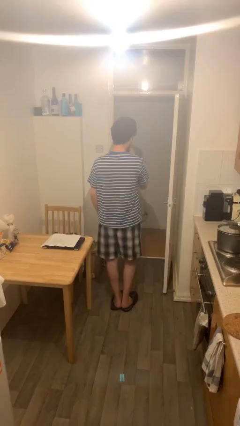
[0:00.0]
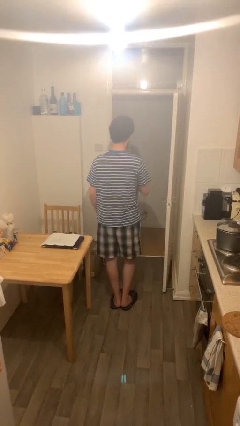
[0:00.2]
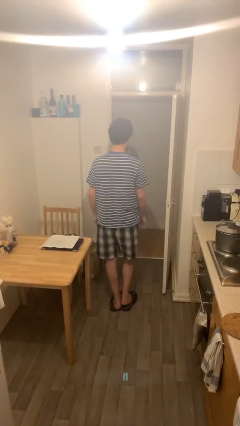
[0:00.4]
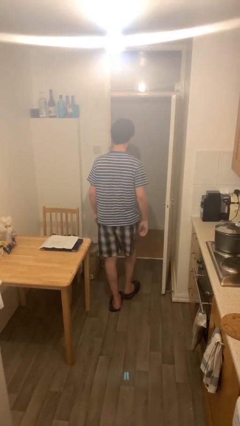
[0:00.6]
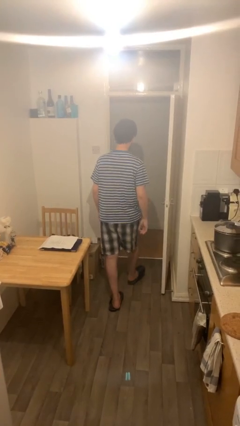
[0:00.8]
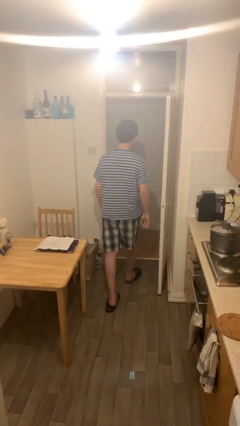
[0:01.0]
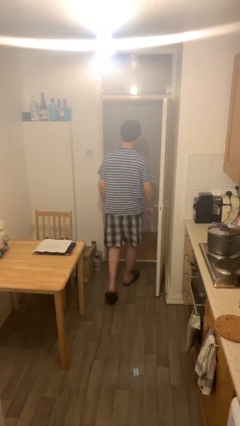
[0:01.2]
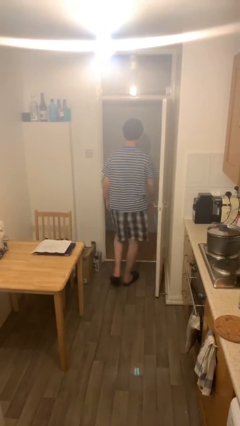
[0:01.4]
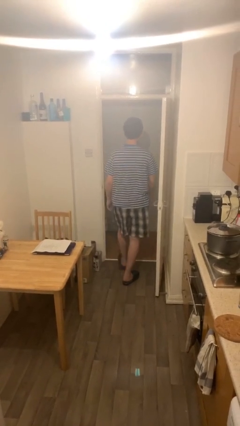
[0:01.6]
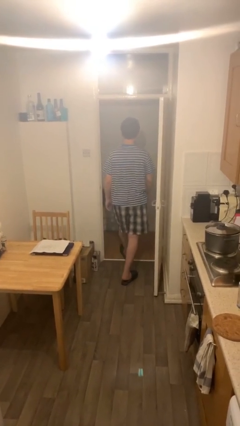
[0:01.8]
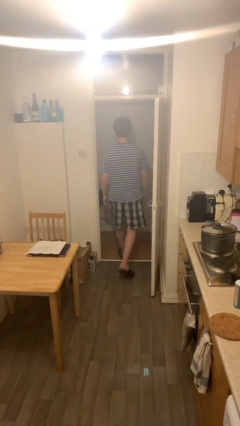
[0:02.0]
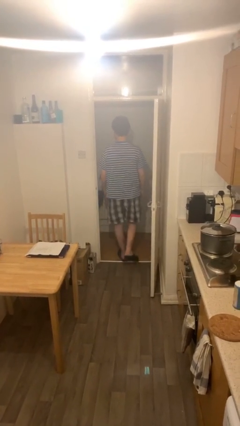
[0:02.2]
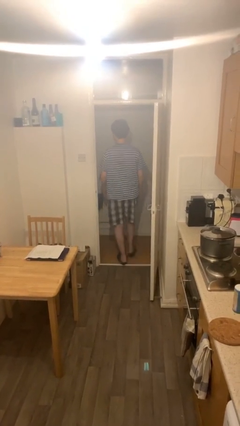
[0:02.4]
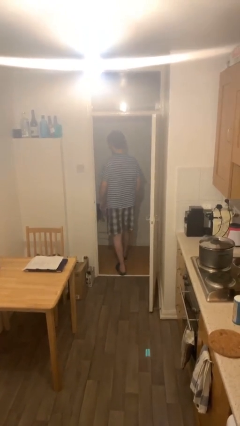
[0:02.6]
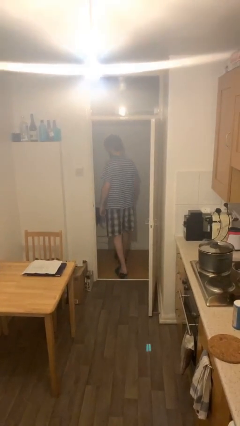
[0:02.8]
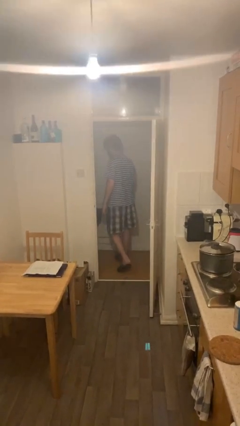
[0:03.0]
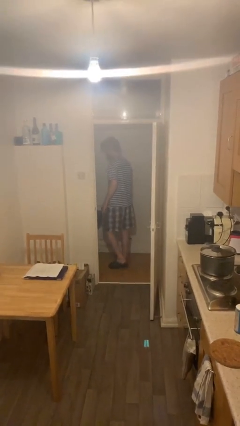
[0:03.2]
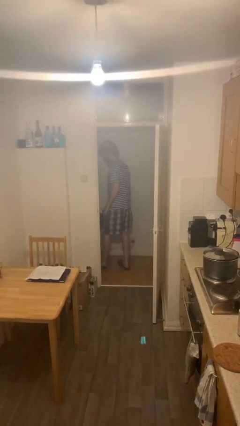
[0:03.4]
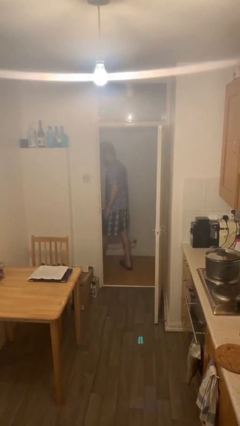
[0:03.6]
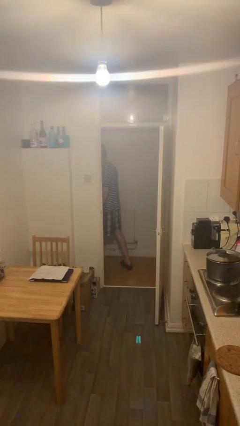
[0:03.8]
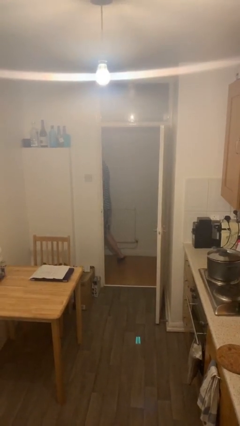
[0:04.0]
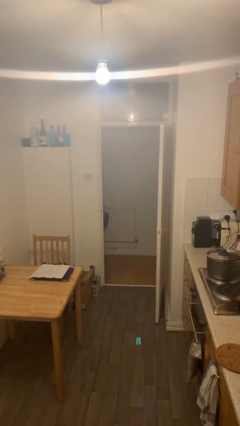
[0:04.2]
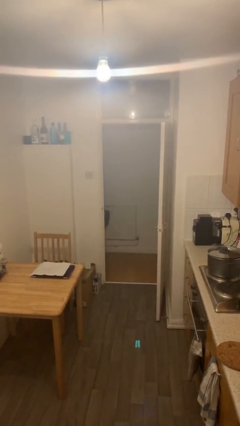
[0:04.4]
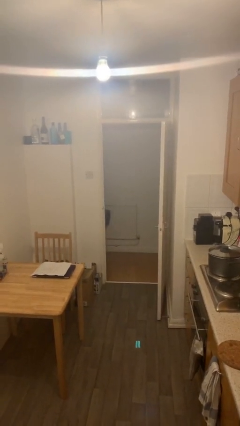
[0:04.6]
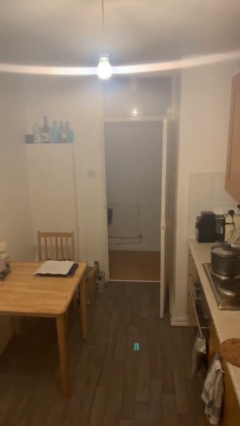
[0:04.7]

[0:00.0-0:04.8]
person exits scene through structure

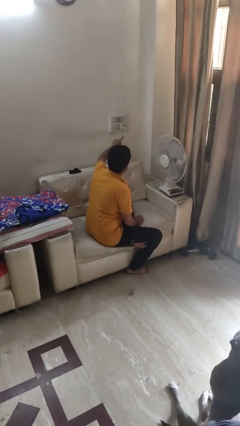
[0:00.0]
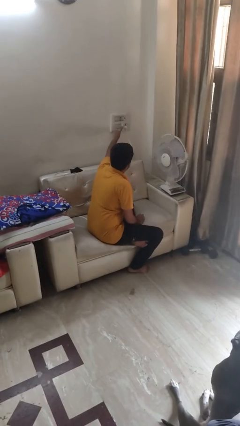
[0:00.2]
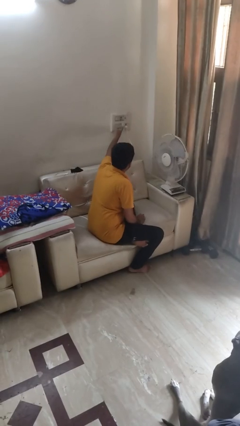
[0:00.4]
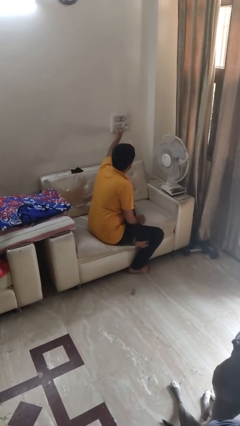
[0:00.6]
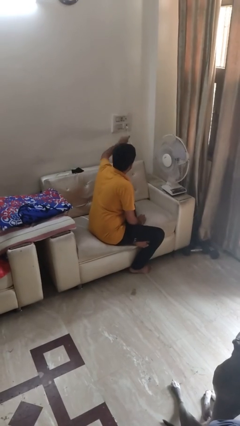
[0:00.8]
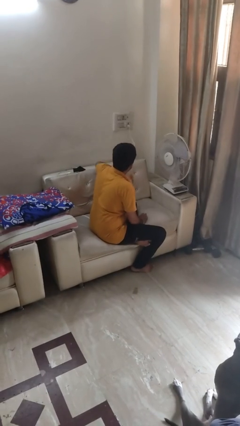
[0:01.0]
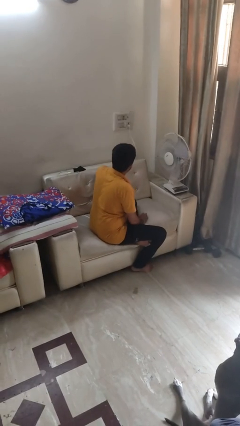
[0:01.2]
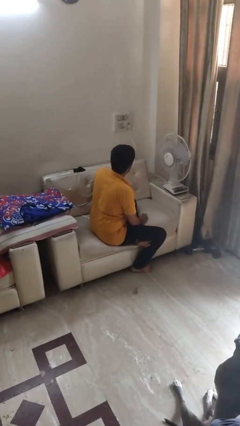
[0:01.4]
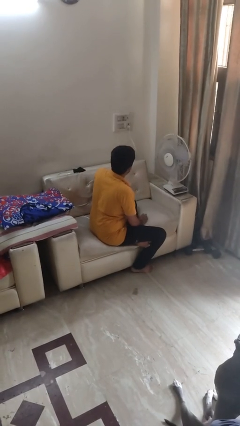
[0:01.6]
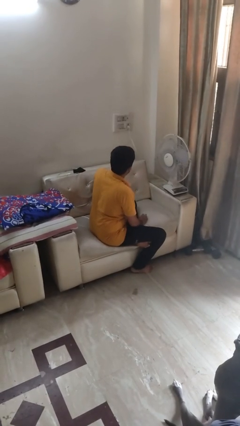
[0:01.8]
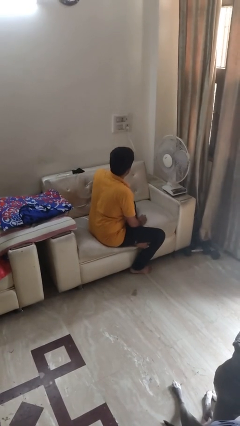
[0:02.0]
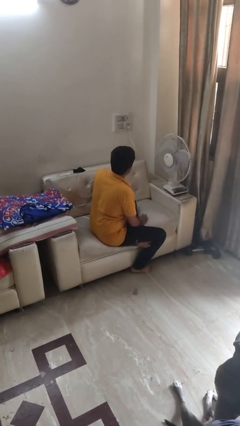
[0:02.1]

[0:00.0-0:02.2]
person turns on fan

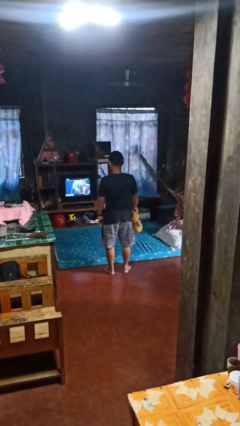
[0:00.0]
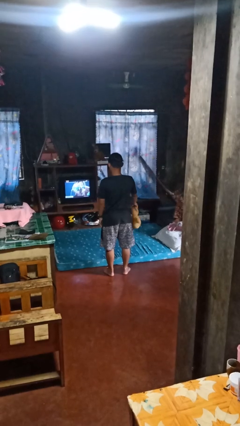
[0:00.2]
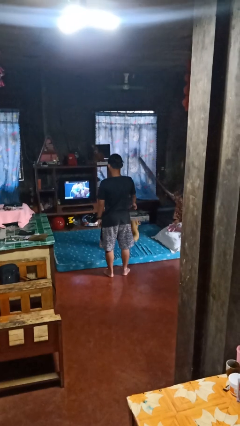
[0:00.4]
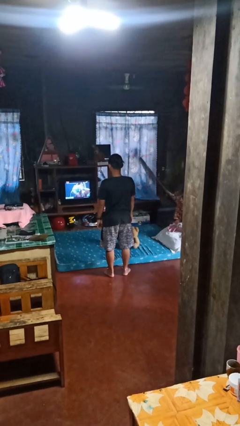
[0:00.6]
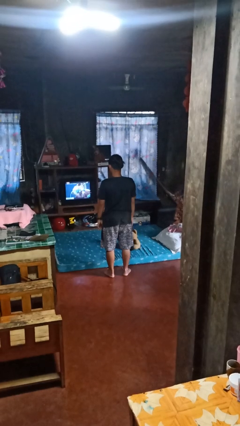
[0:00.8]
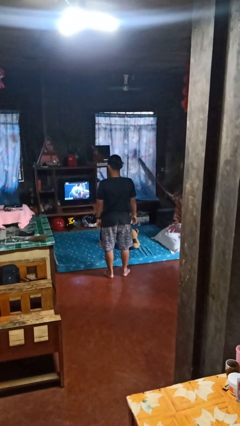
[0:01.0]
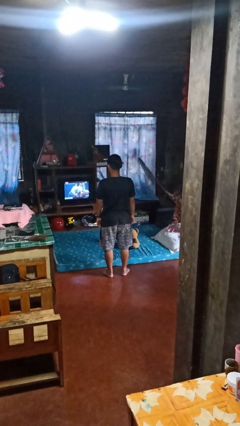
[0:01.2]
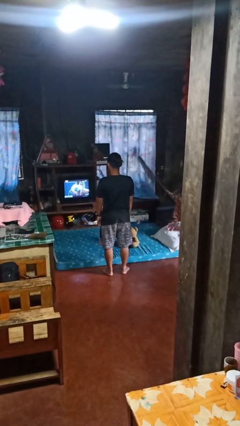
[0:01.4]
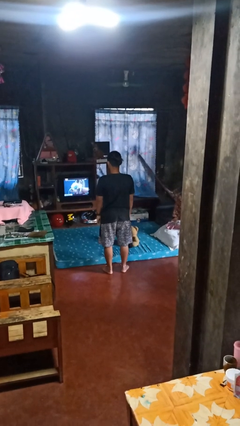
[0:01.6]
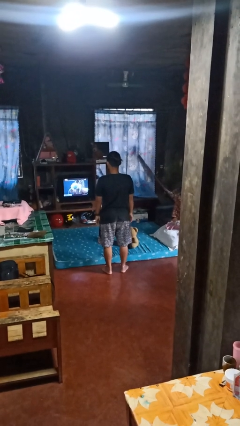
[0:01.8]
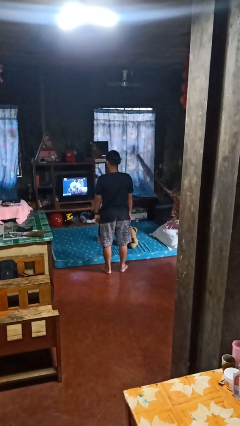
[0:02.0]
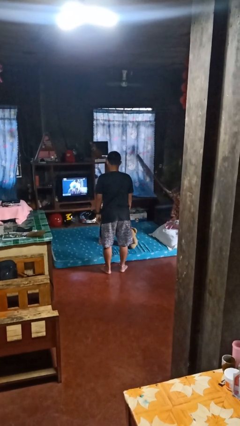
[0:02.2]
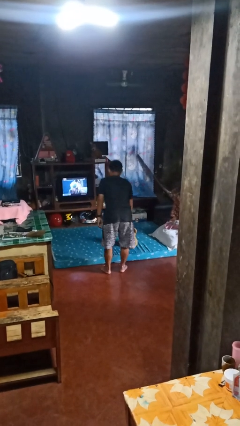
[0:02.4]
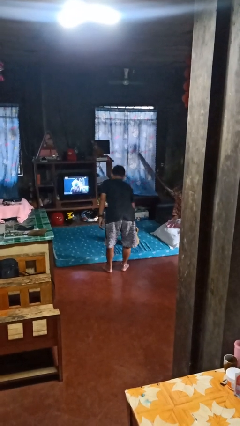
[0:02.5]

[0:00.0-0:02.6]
person throws object on bed

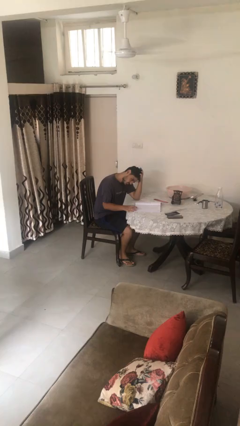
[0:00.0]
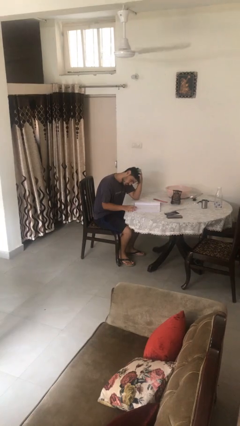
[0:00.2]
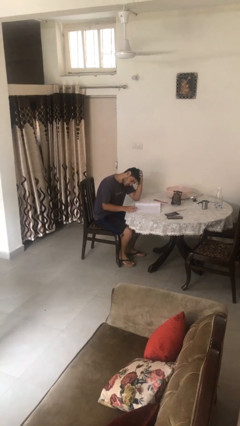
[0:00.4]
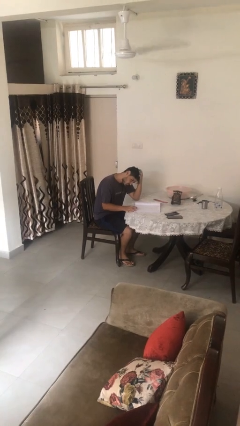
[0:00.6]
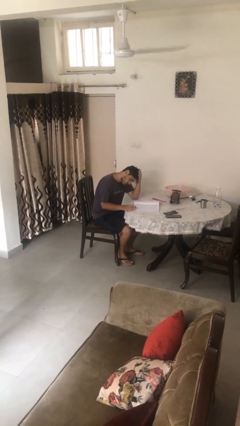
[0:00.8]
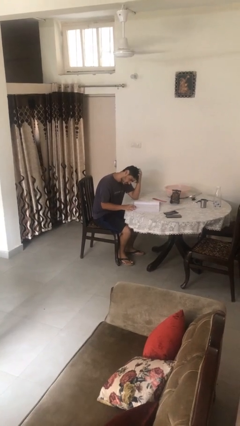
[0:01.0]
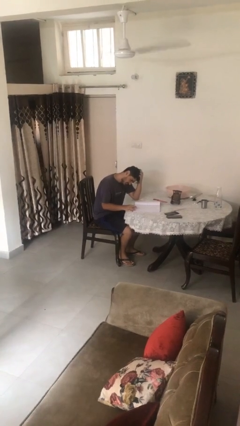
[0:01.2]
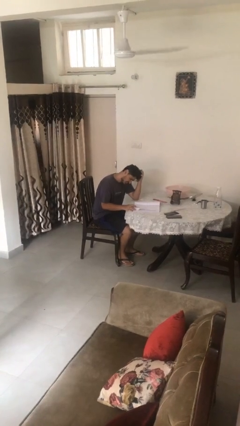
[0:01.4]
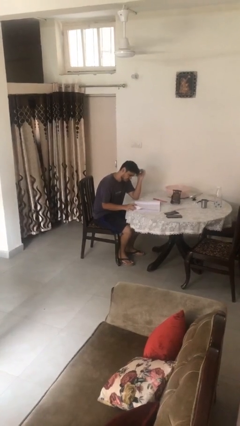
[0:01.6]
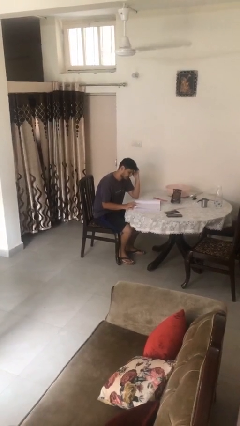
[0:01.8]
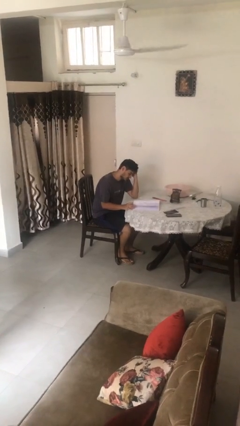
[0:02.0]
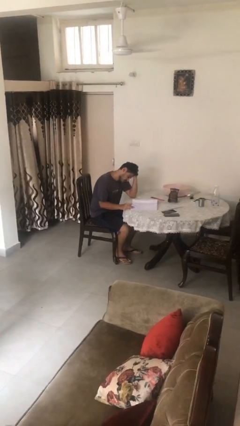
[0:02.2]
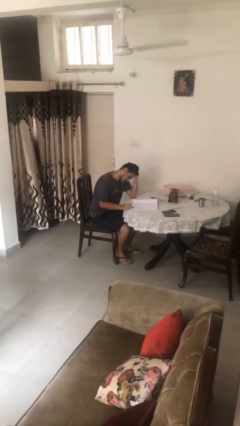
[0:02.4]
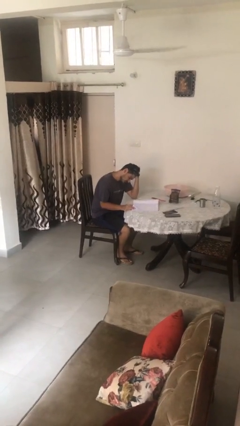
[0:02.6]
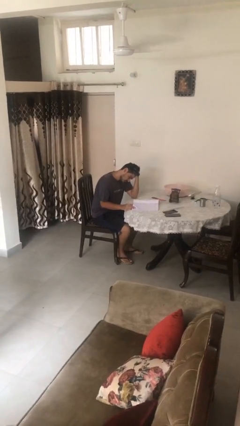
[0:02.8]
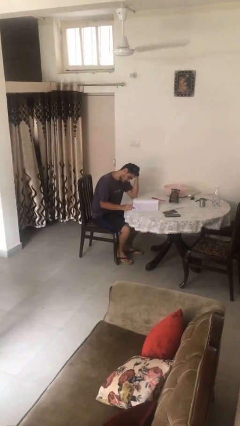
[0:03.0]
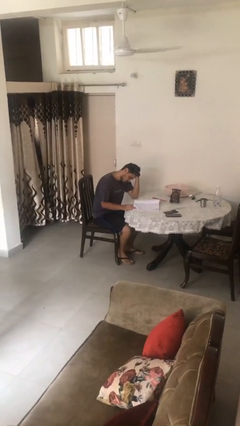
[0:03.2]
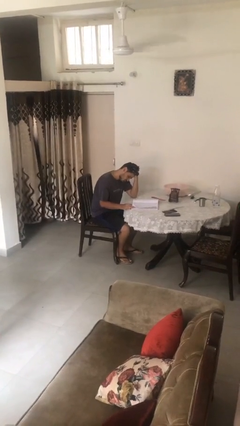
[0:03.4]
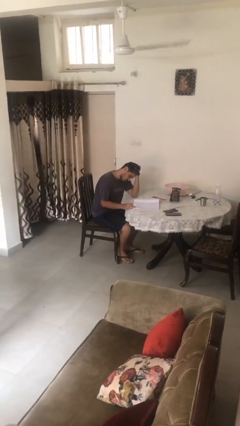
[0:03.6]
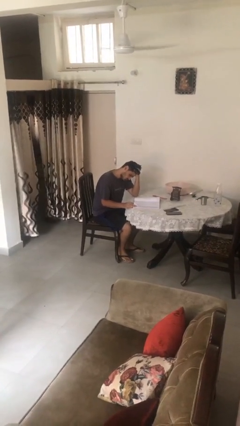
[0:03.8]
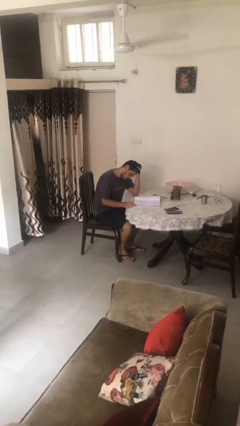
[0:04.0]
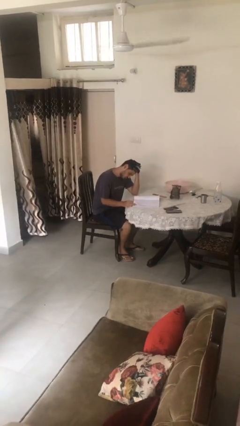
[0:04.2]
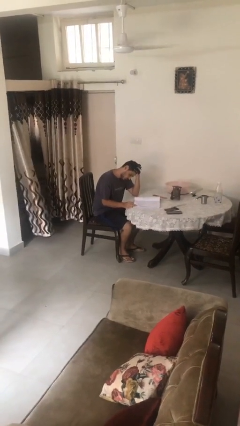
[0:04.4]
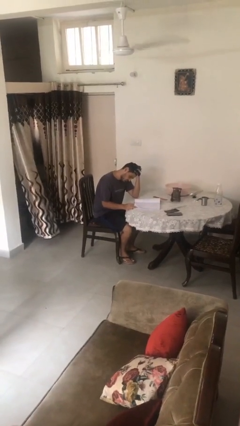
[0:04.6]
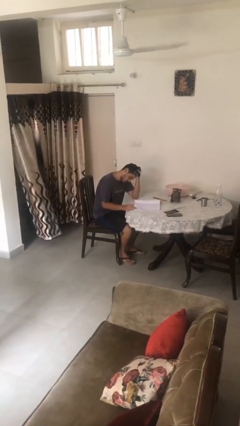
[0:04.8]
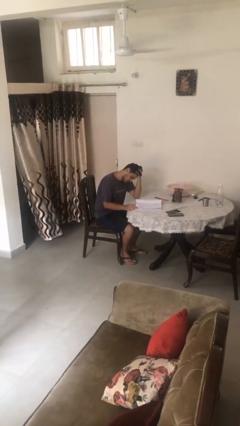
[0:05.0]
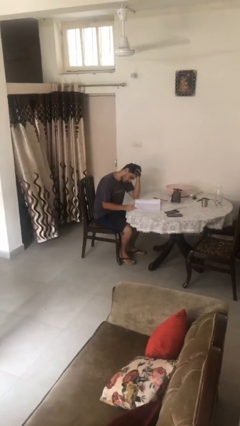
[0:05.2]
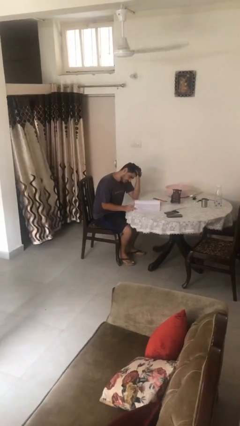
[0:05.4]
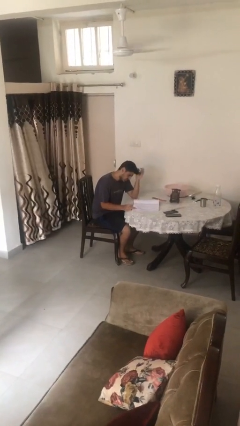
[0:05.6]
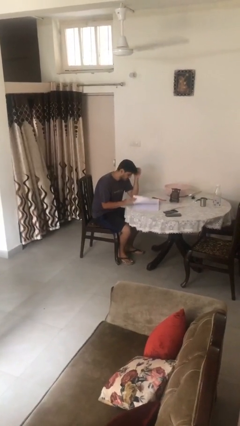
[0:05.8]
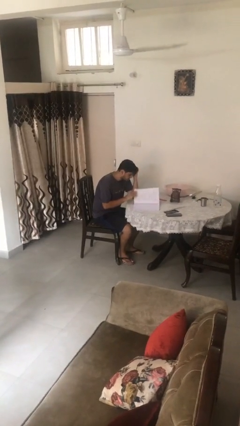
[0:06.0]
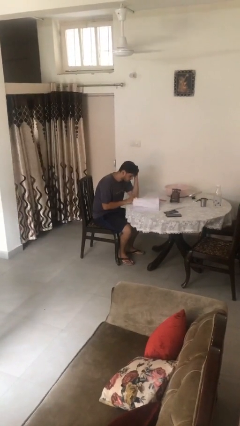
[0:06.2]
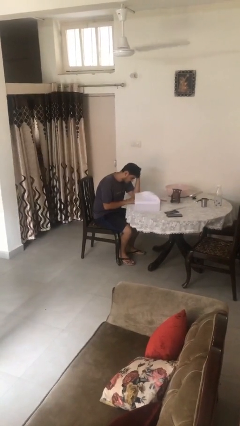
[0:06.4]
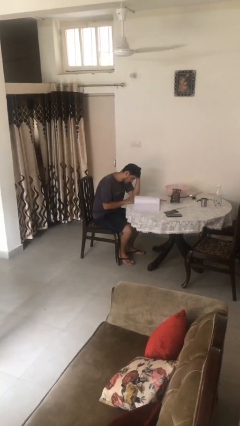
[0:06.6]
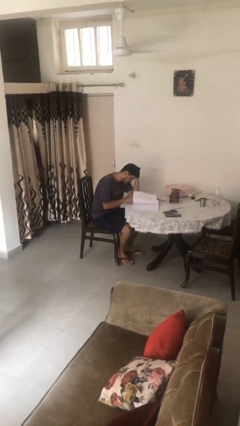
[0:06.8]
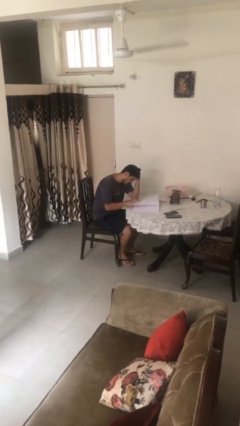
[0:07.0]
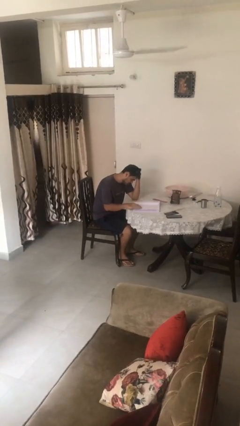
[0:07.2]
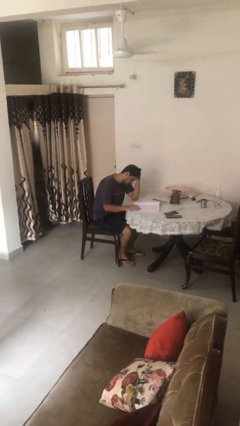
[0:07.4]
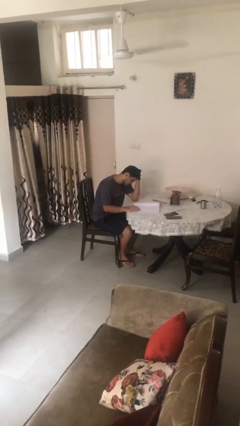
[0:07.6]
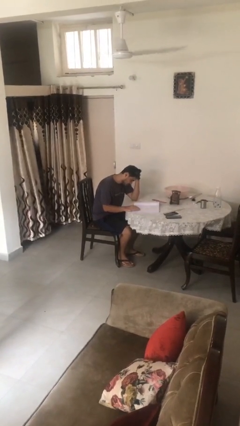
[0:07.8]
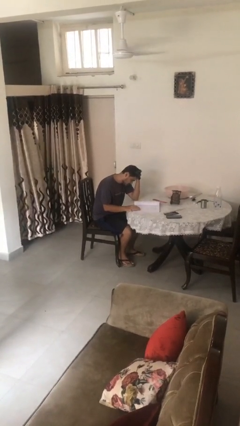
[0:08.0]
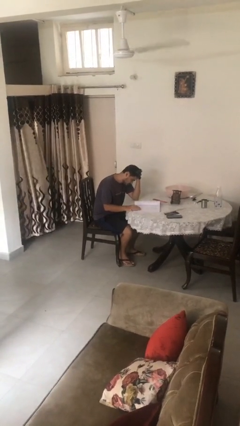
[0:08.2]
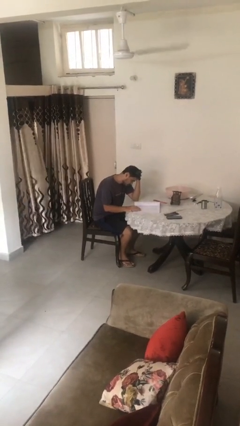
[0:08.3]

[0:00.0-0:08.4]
person reads document
